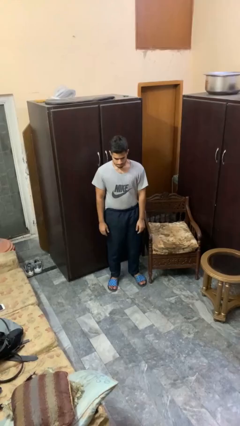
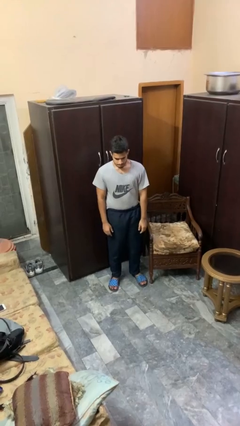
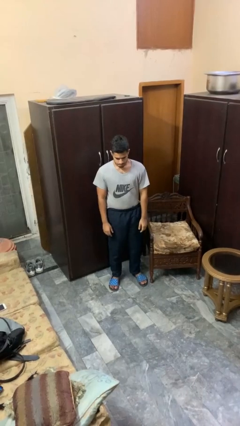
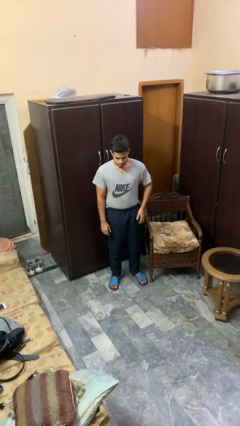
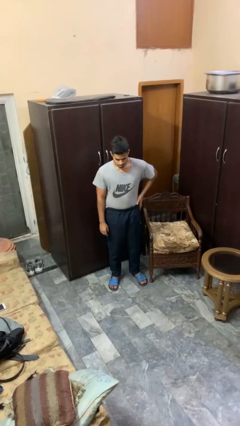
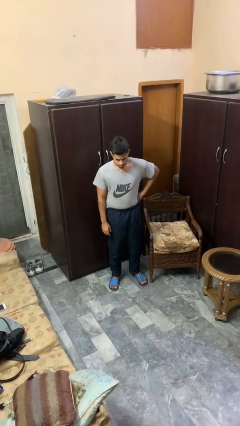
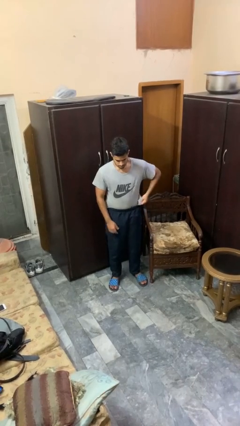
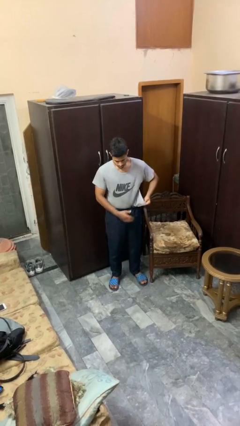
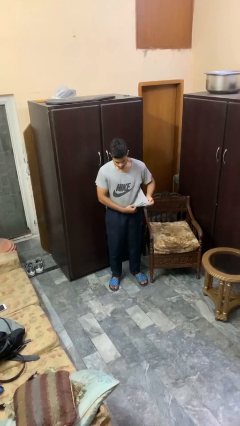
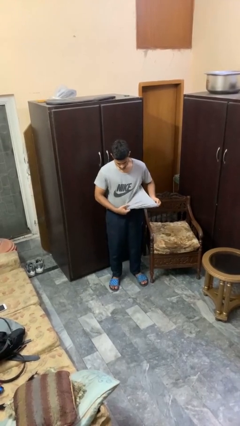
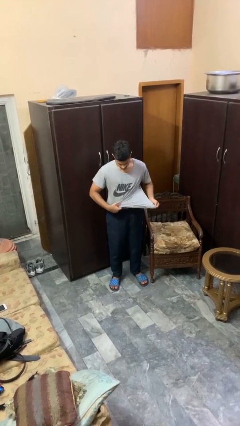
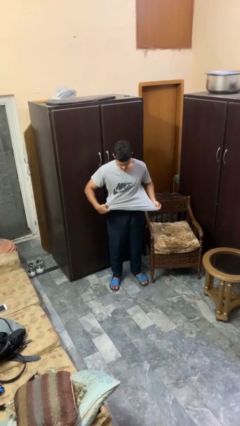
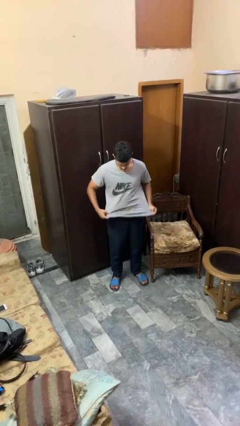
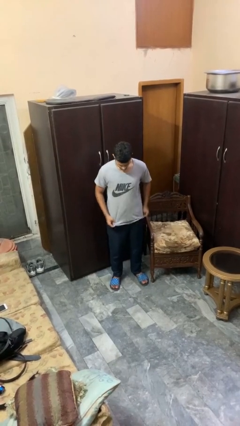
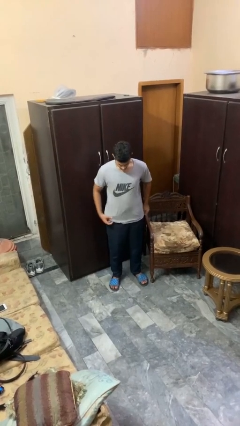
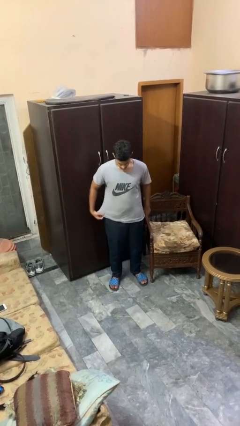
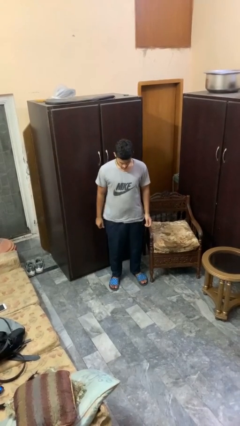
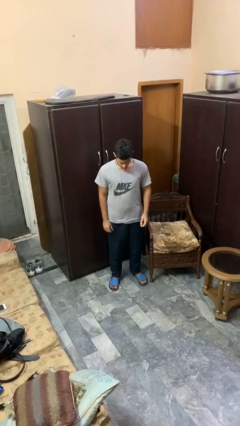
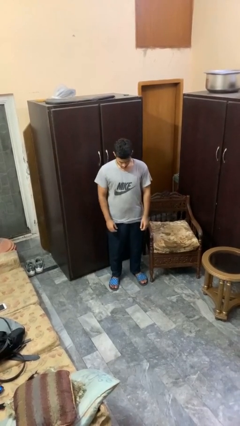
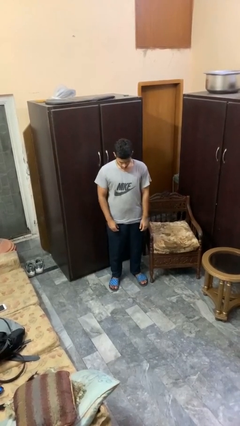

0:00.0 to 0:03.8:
person untucks shirt

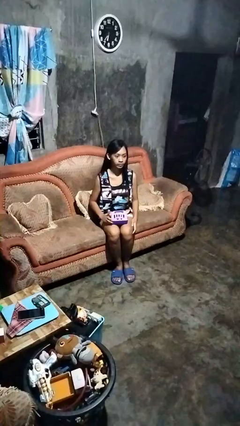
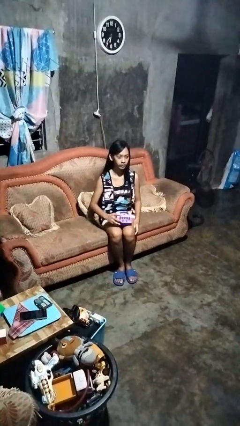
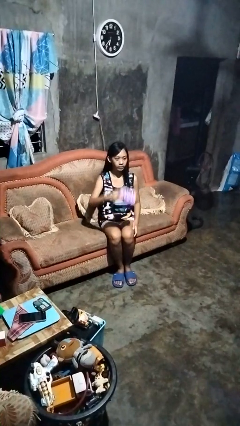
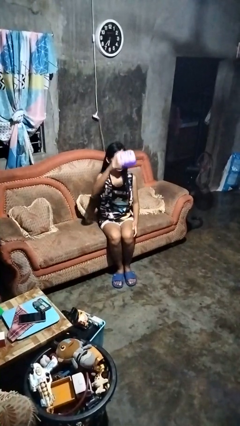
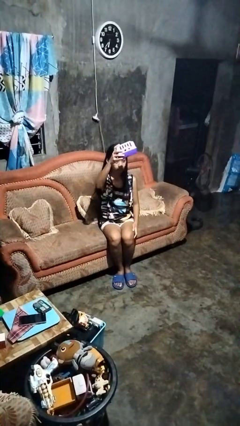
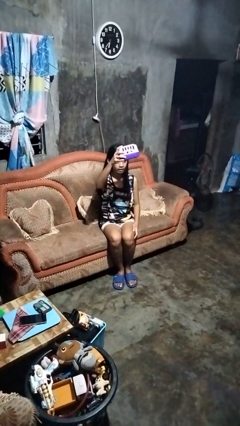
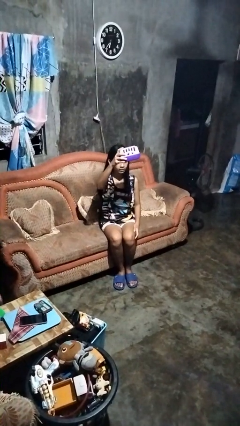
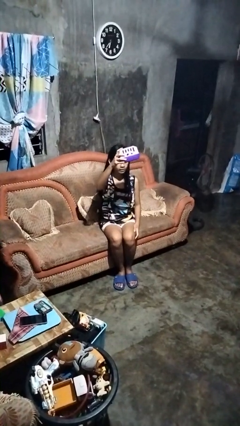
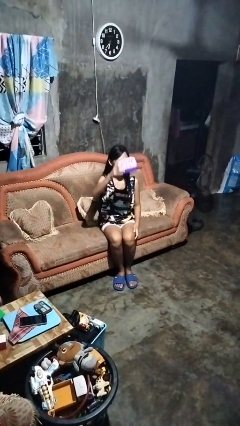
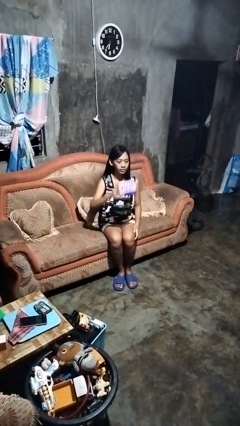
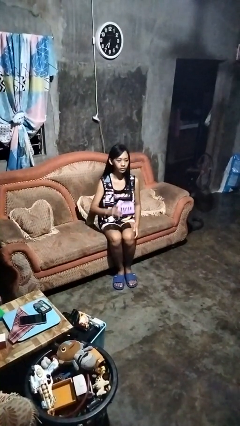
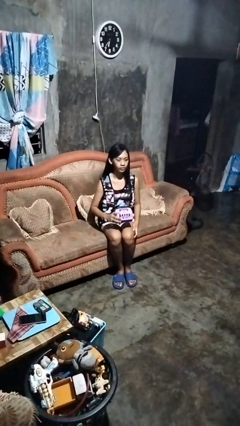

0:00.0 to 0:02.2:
person holds object above head

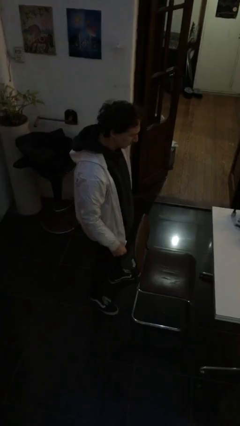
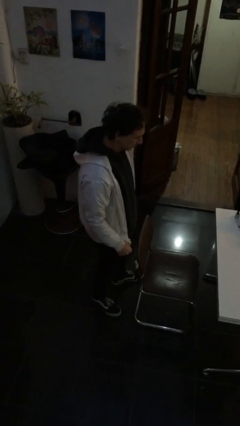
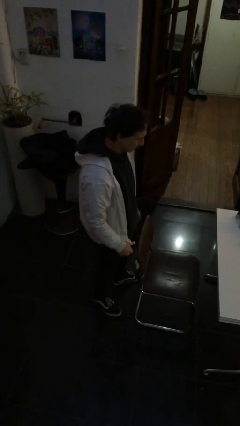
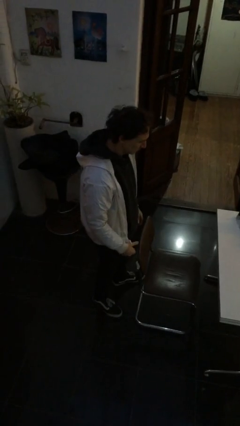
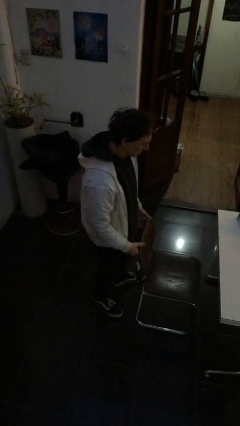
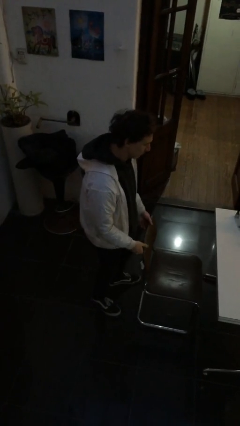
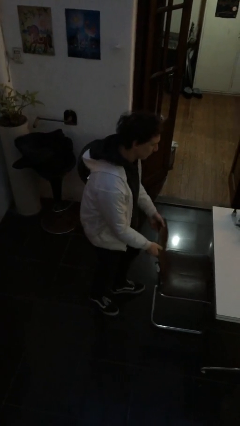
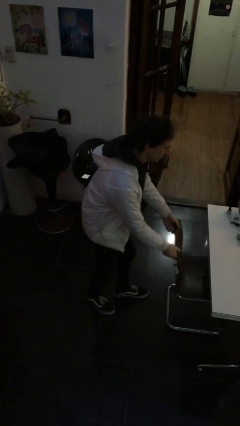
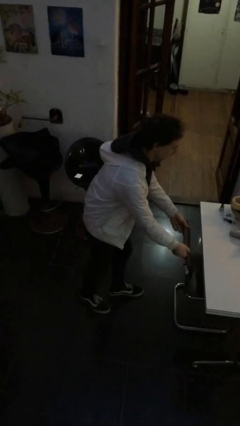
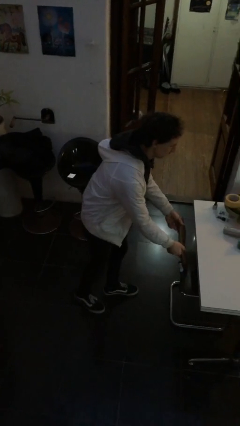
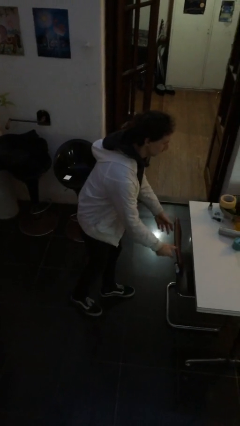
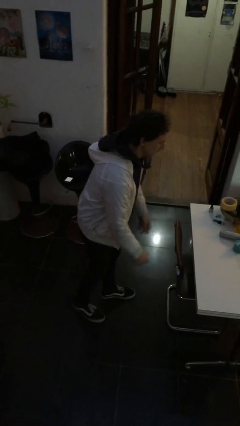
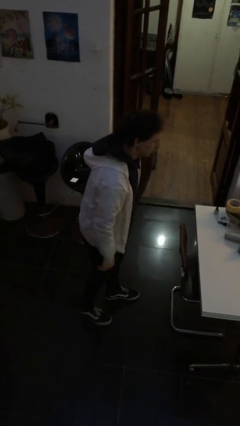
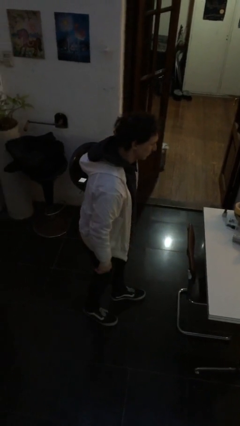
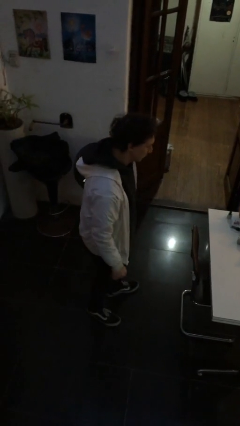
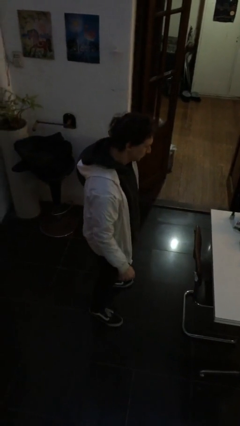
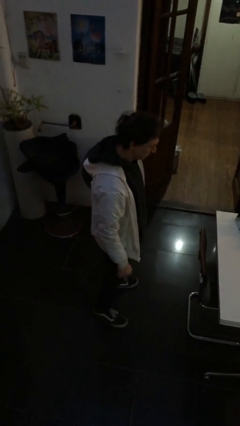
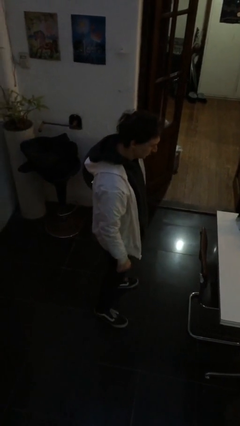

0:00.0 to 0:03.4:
person pushes in chair

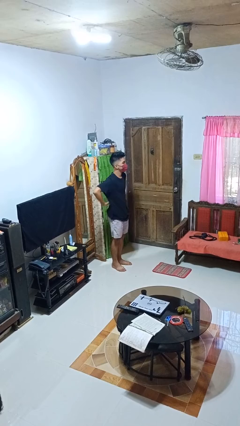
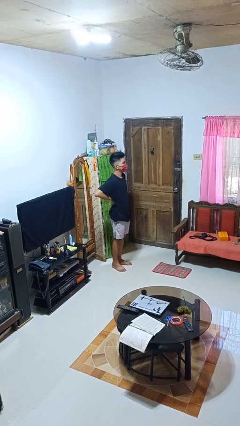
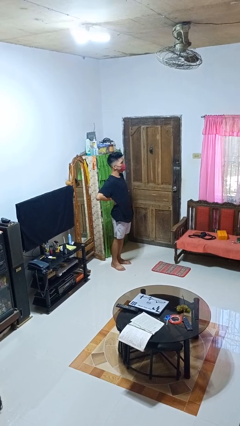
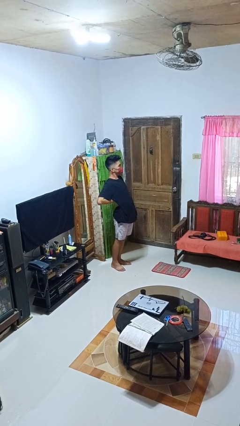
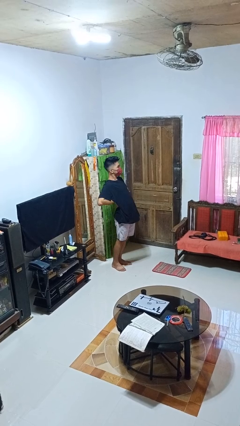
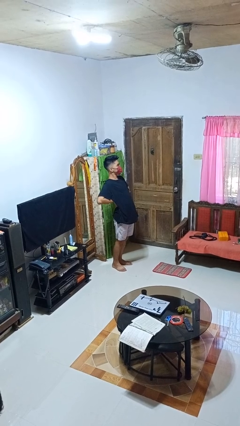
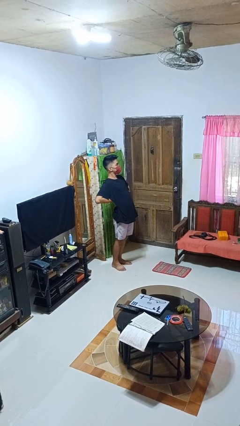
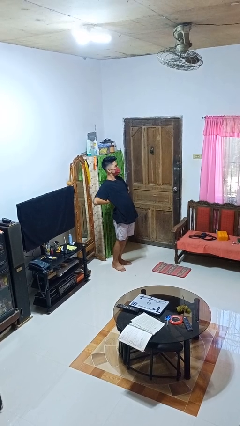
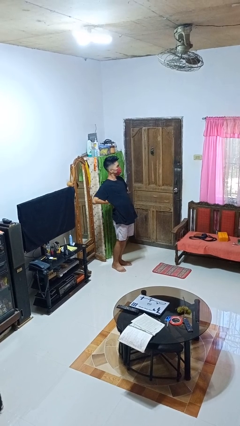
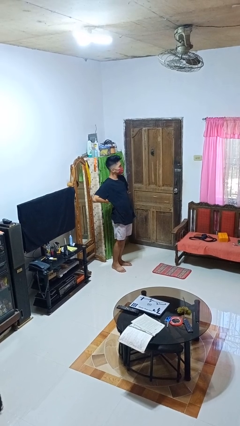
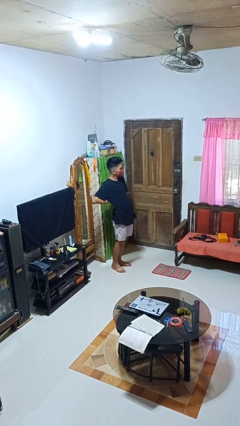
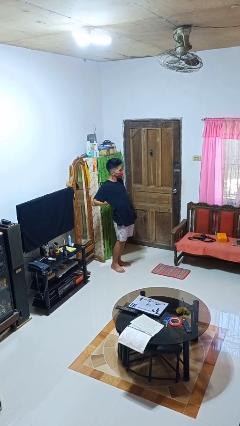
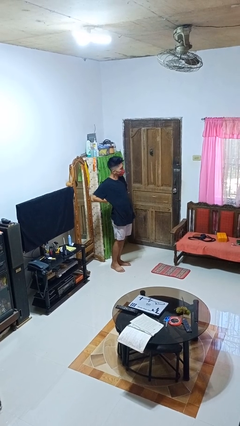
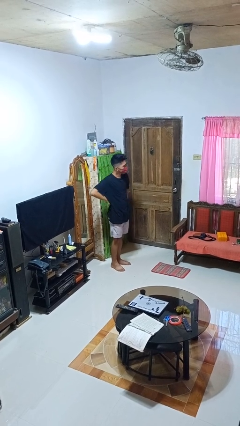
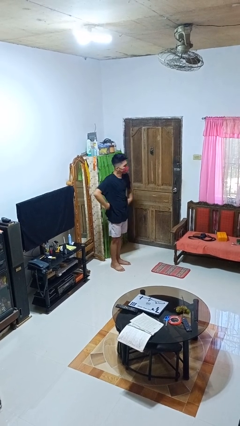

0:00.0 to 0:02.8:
person stretches back

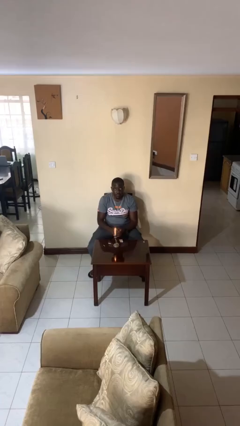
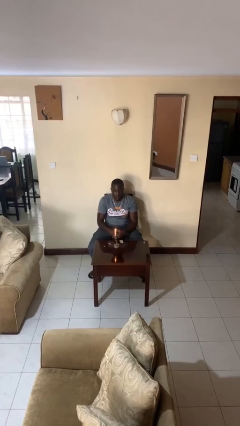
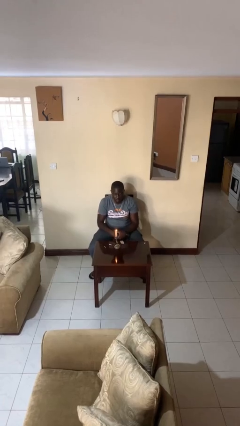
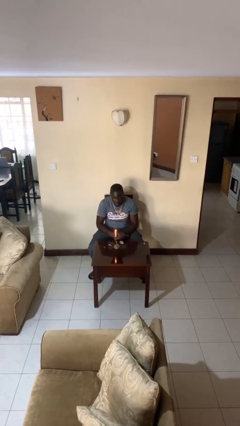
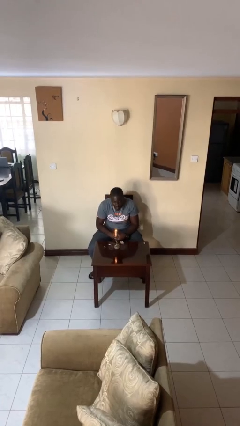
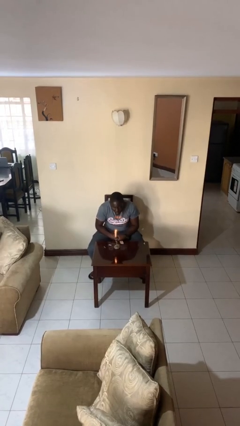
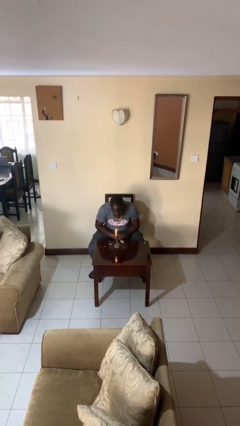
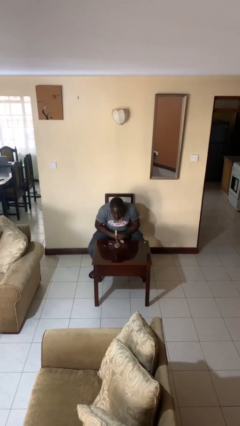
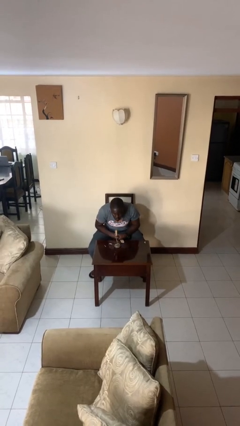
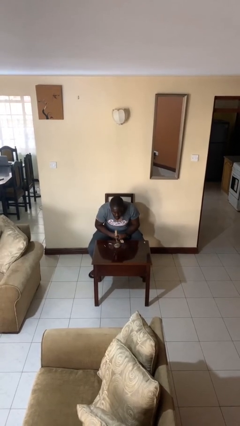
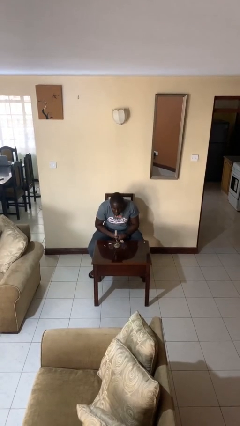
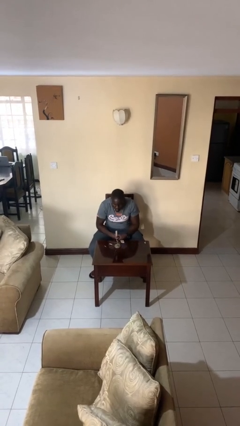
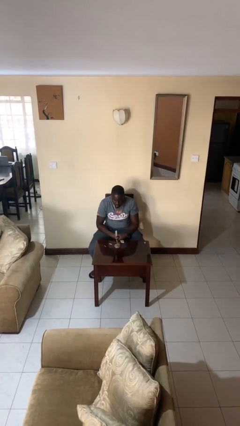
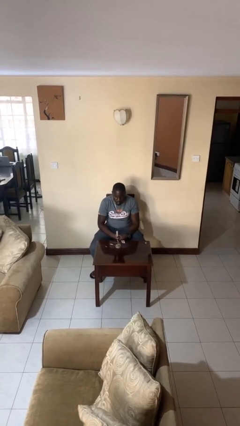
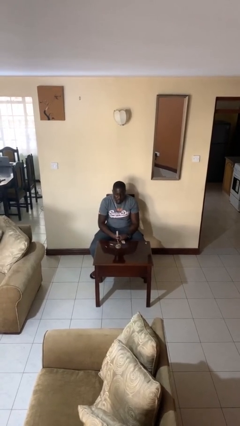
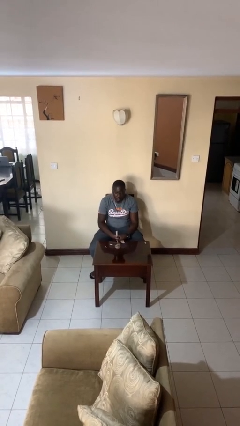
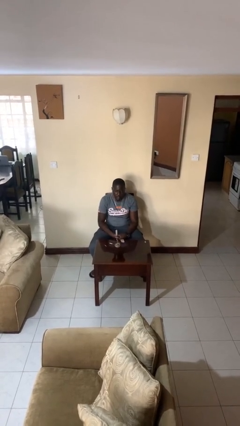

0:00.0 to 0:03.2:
person extinguishes candle

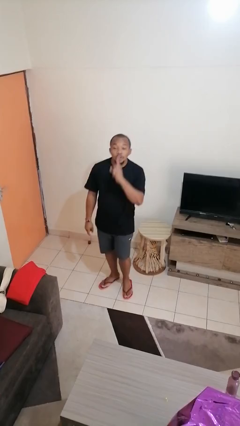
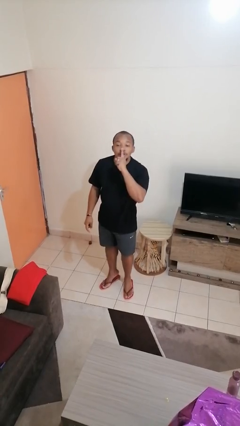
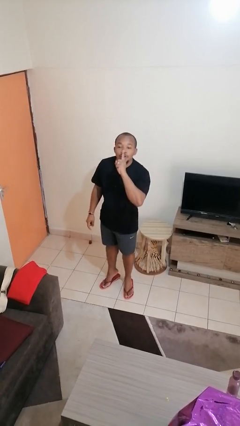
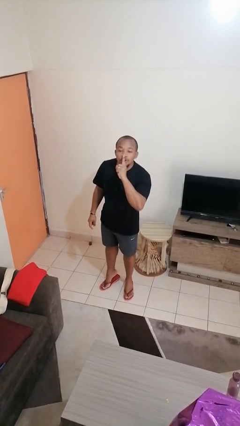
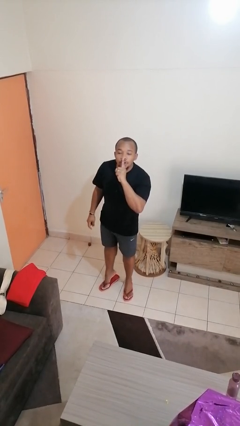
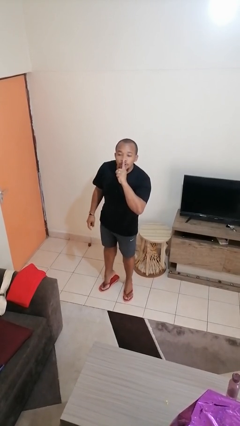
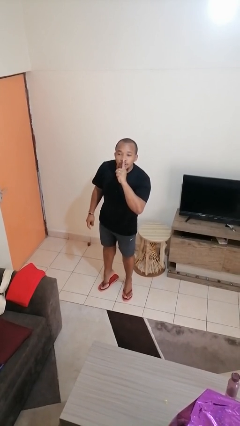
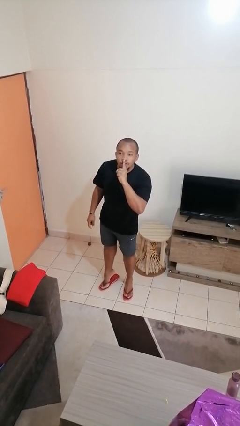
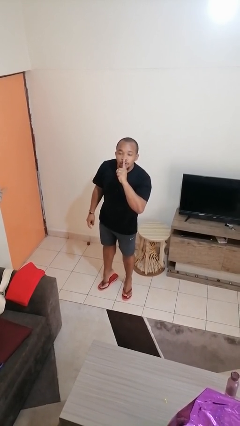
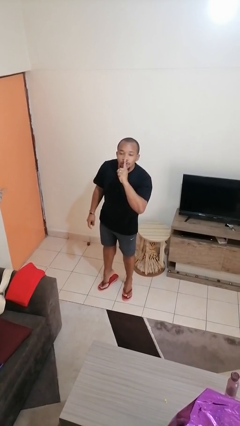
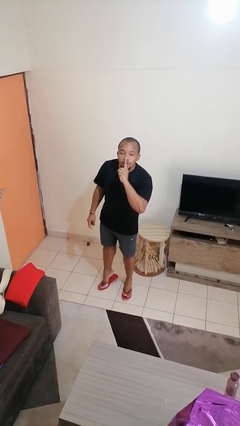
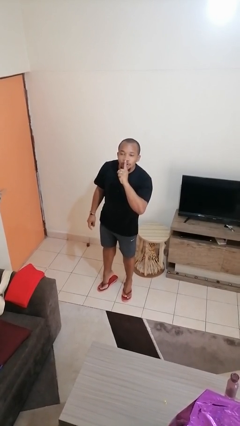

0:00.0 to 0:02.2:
person gestures be quiet
